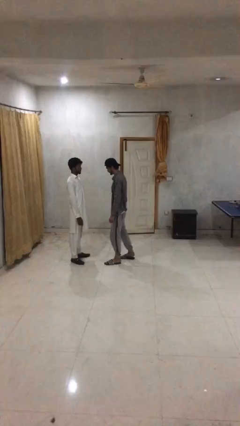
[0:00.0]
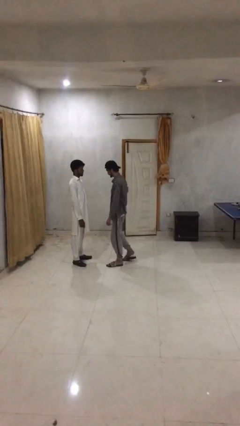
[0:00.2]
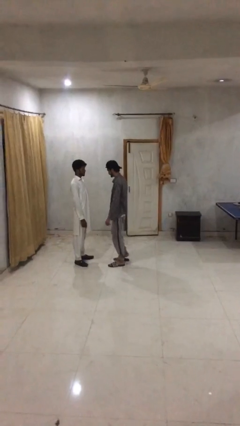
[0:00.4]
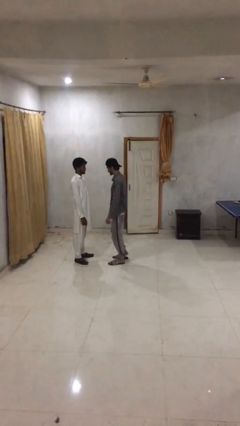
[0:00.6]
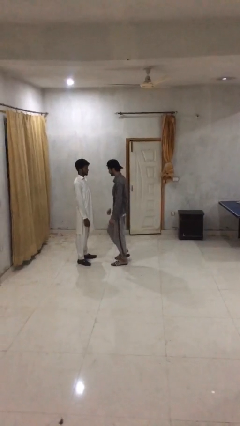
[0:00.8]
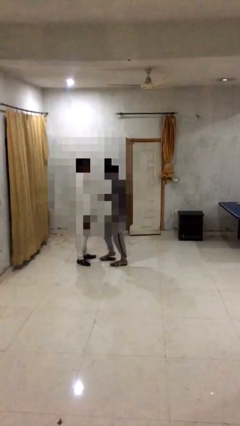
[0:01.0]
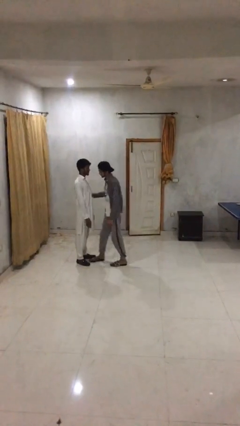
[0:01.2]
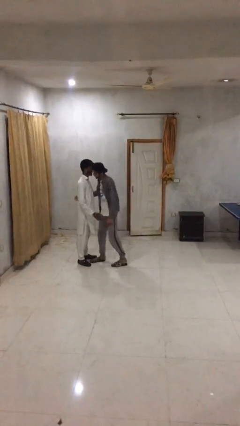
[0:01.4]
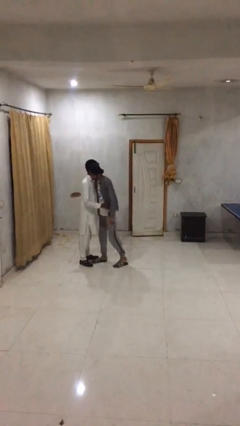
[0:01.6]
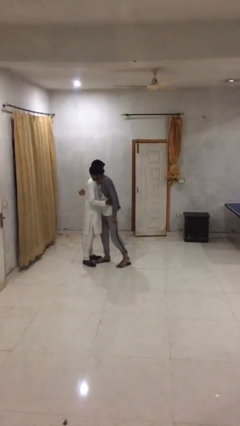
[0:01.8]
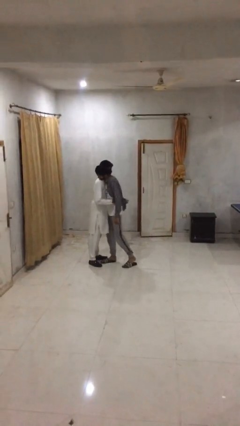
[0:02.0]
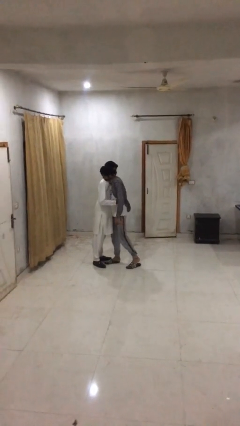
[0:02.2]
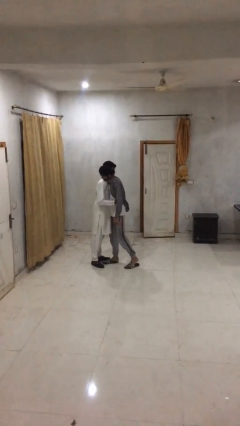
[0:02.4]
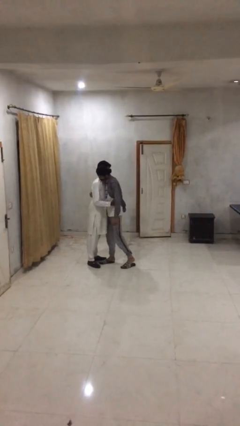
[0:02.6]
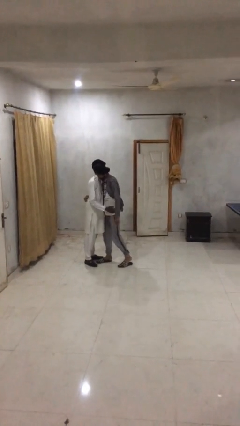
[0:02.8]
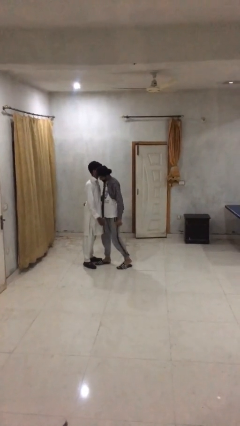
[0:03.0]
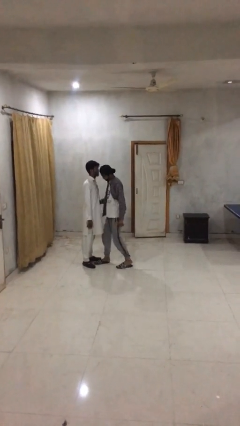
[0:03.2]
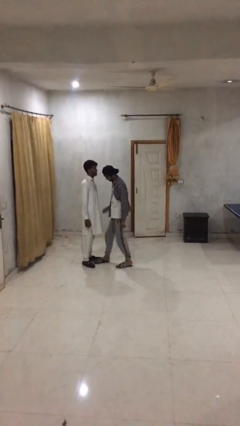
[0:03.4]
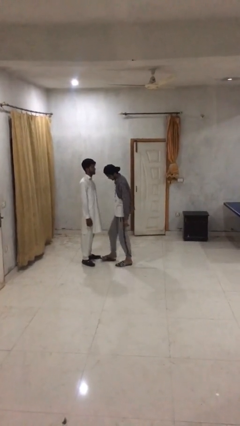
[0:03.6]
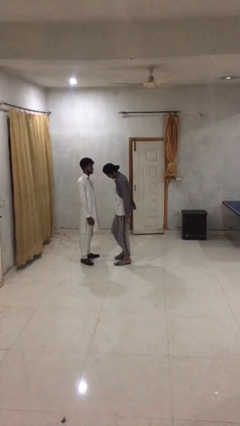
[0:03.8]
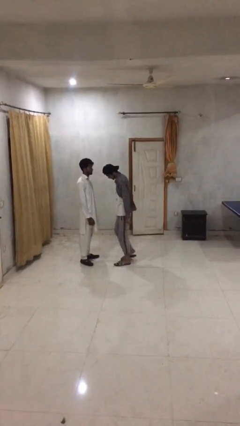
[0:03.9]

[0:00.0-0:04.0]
person embraces person

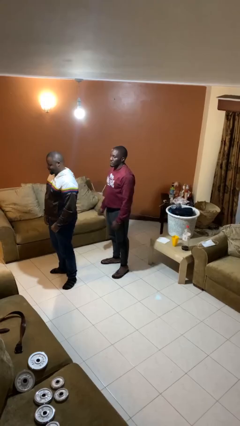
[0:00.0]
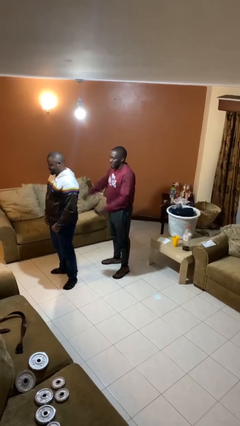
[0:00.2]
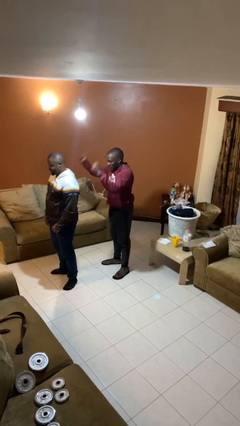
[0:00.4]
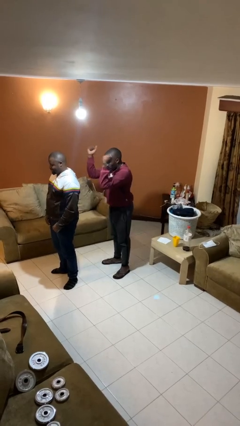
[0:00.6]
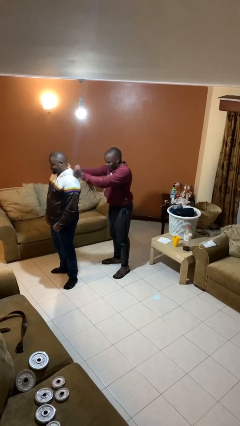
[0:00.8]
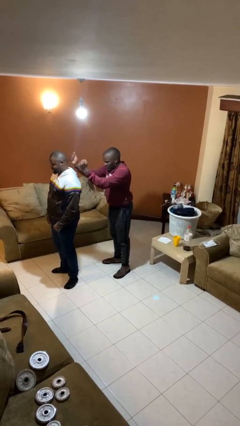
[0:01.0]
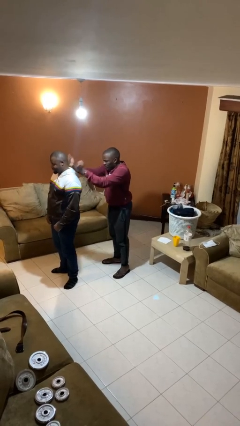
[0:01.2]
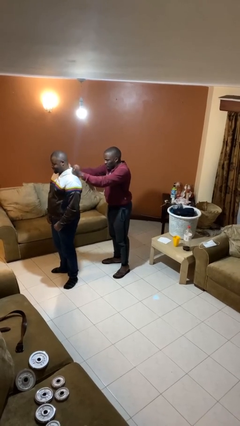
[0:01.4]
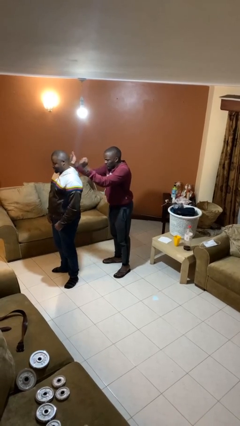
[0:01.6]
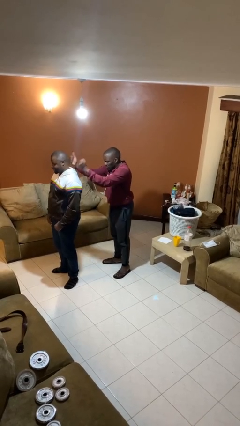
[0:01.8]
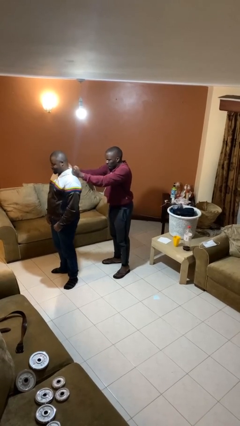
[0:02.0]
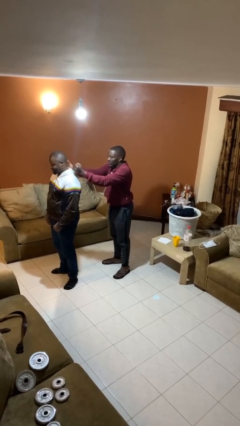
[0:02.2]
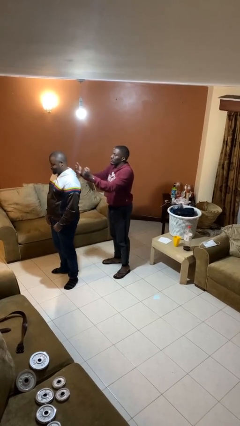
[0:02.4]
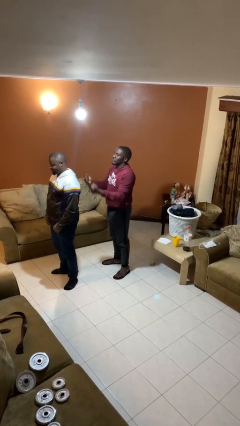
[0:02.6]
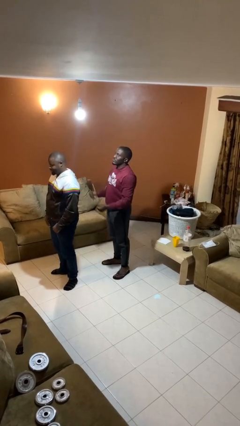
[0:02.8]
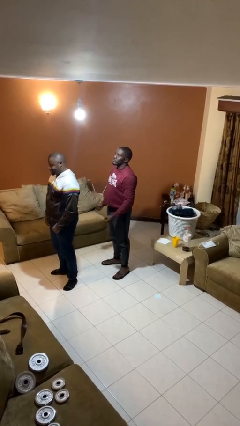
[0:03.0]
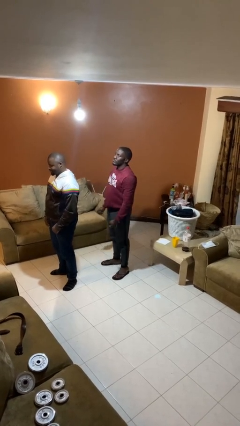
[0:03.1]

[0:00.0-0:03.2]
person pounds shoulders of person

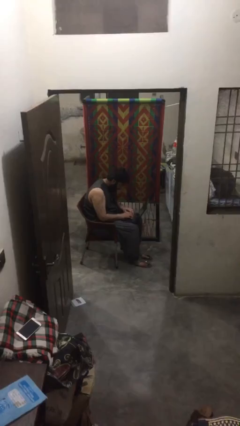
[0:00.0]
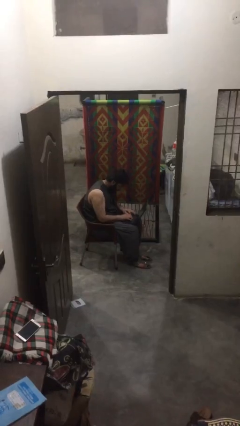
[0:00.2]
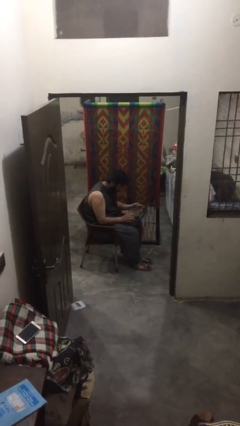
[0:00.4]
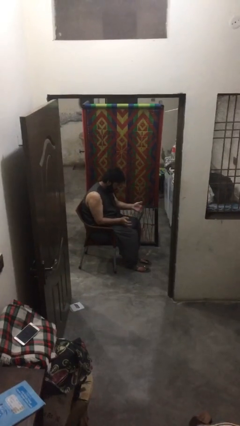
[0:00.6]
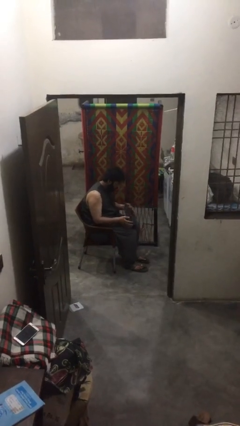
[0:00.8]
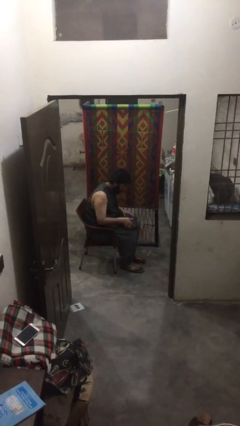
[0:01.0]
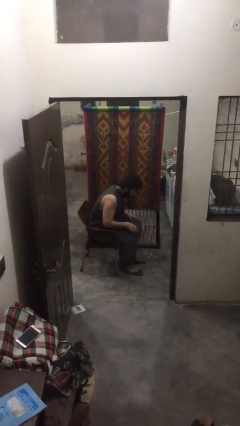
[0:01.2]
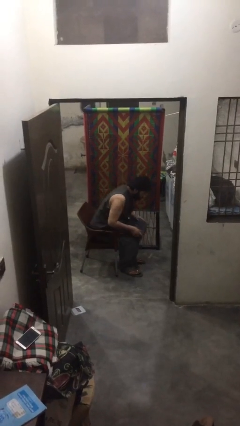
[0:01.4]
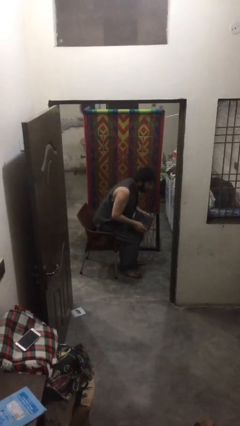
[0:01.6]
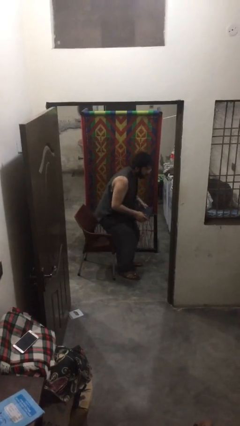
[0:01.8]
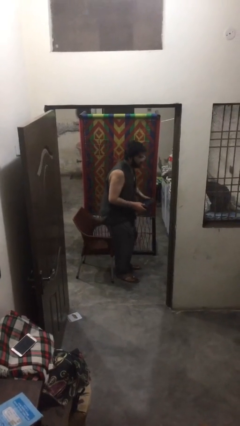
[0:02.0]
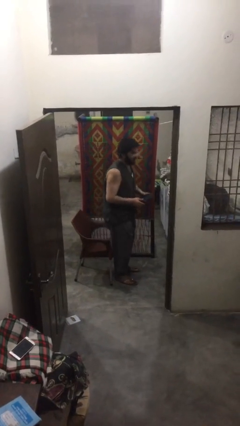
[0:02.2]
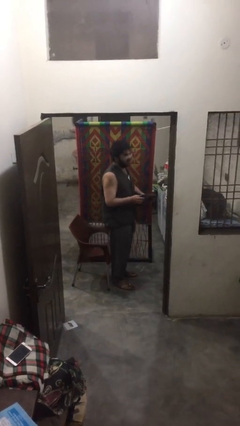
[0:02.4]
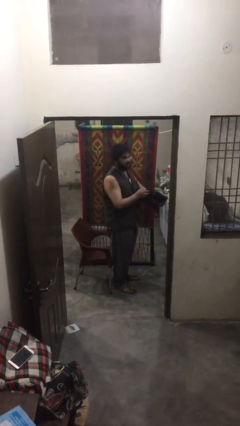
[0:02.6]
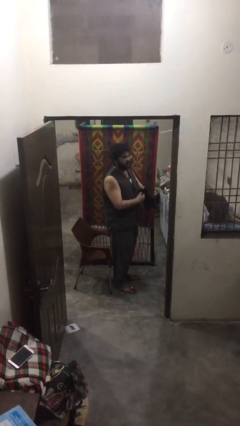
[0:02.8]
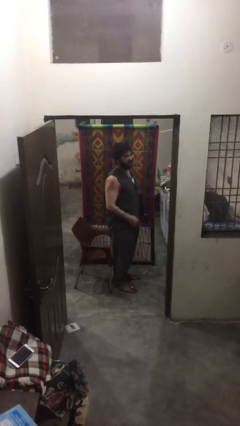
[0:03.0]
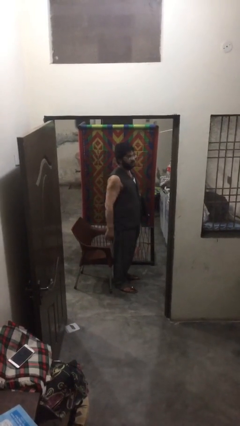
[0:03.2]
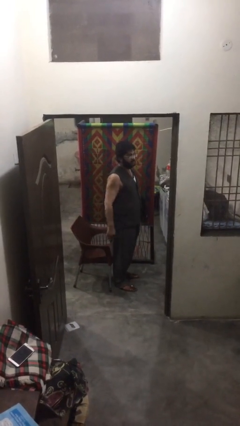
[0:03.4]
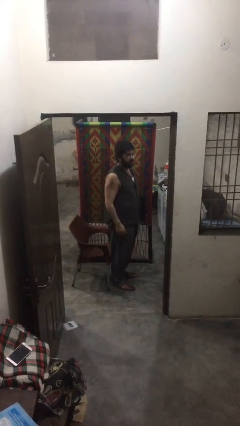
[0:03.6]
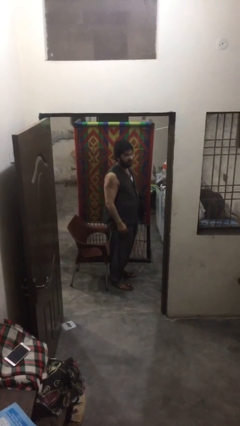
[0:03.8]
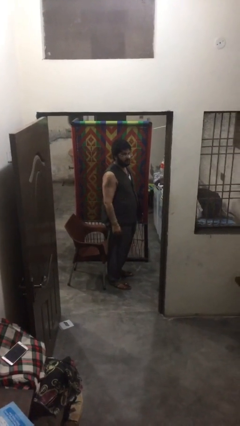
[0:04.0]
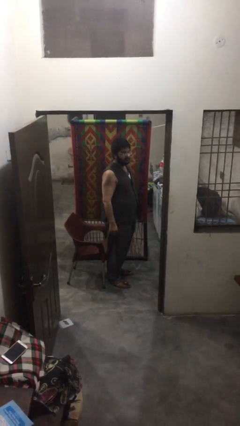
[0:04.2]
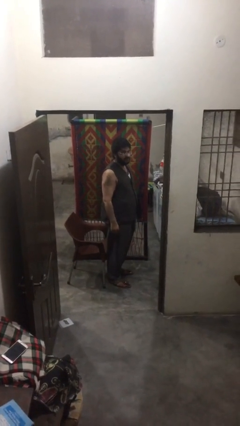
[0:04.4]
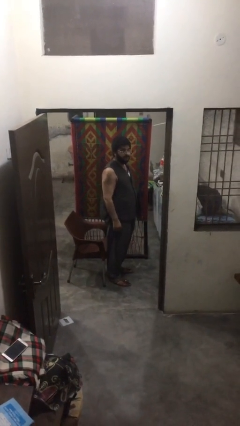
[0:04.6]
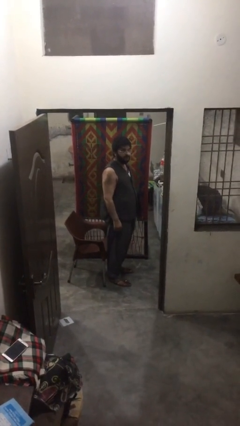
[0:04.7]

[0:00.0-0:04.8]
person stands up

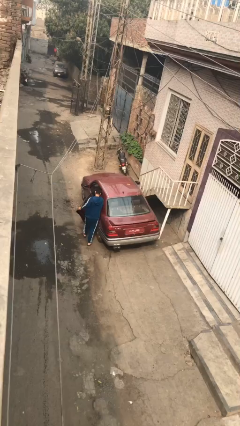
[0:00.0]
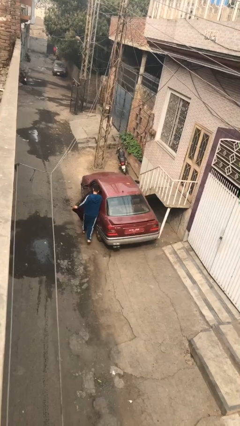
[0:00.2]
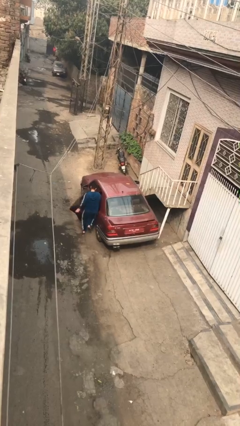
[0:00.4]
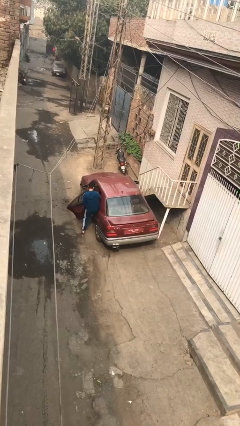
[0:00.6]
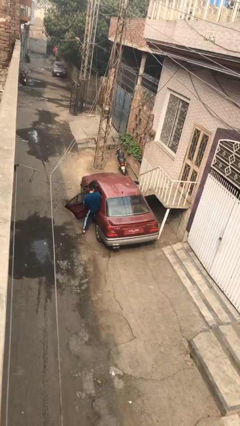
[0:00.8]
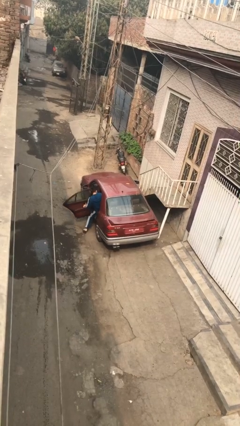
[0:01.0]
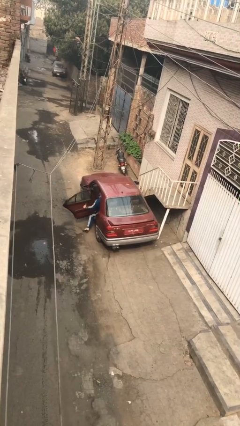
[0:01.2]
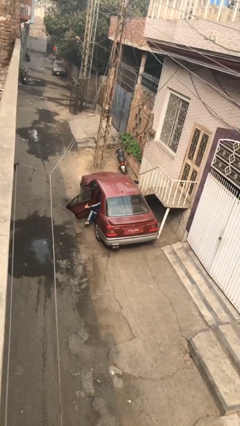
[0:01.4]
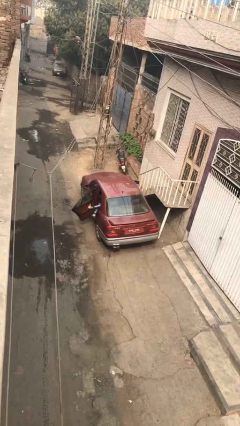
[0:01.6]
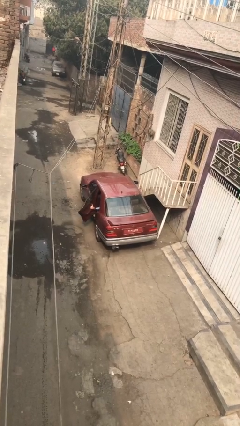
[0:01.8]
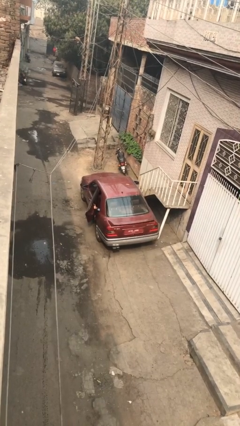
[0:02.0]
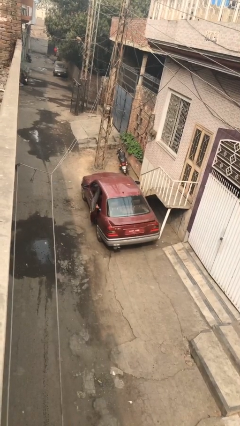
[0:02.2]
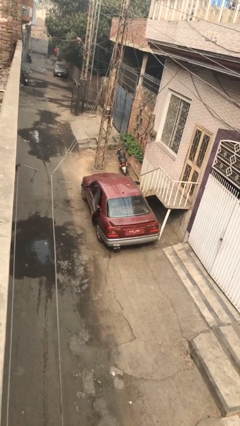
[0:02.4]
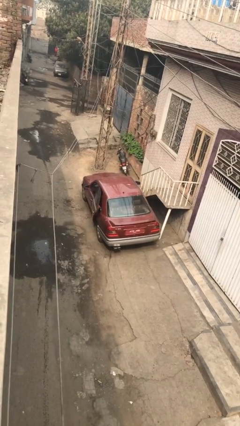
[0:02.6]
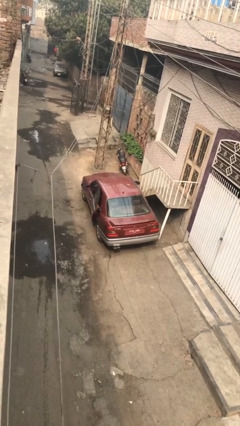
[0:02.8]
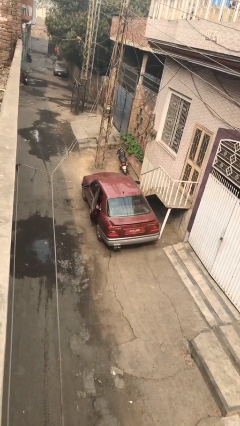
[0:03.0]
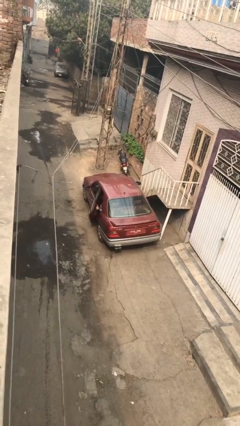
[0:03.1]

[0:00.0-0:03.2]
car picks up person

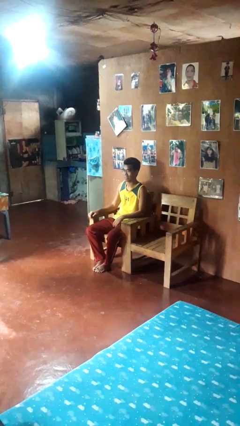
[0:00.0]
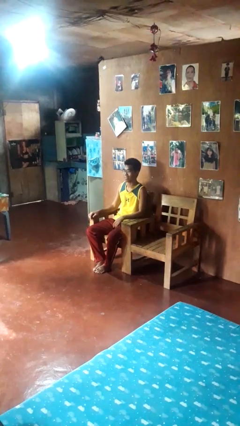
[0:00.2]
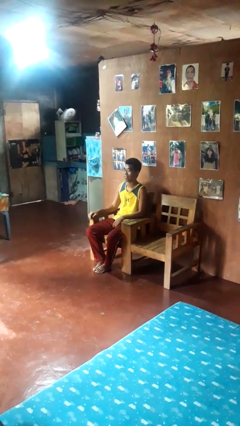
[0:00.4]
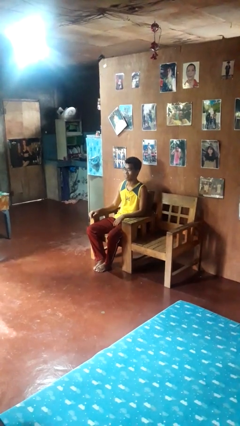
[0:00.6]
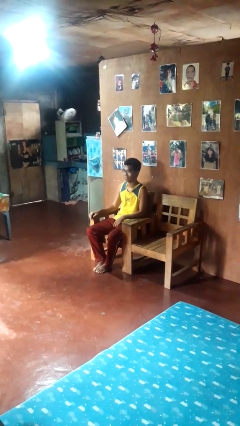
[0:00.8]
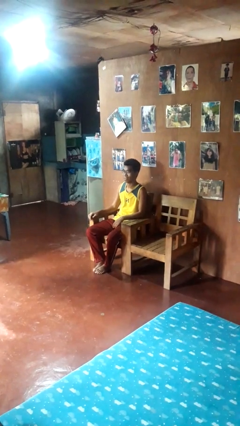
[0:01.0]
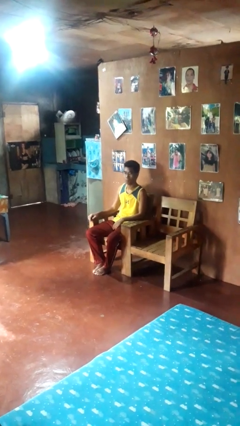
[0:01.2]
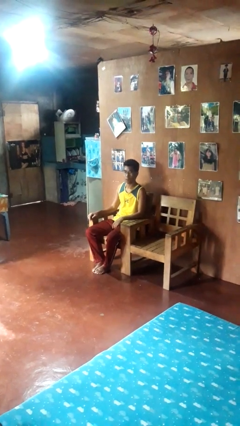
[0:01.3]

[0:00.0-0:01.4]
person nods head

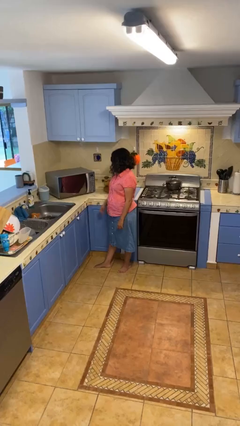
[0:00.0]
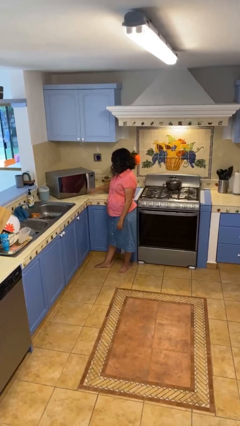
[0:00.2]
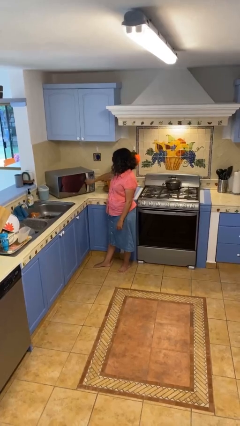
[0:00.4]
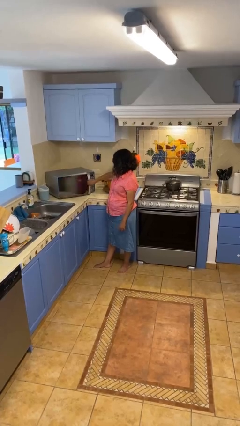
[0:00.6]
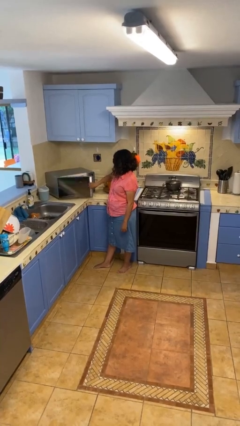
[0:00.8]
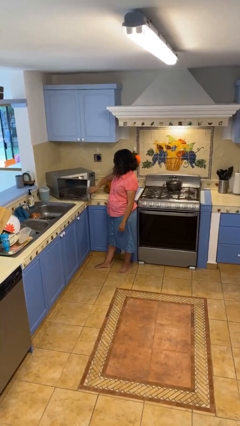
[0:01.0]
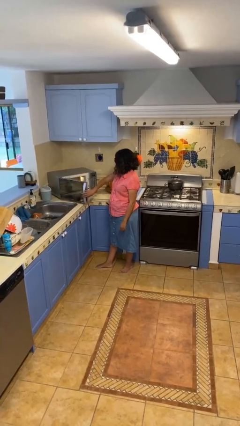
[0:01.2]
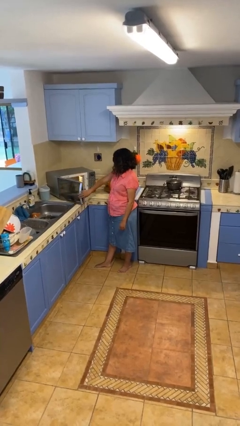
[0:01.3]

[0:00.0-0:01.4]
person opens microwave

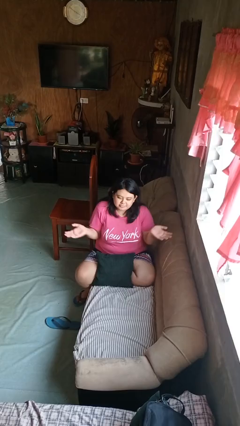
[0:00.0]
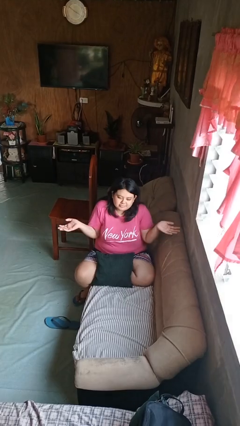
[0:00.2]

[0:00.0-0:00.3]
person shrugs
